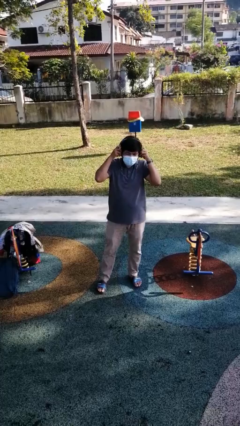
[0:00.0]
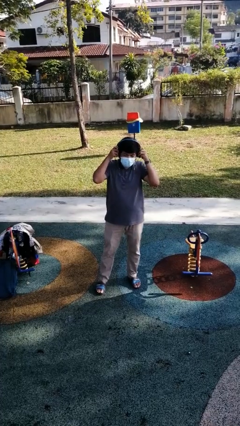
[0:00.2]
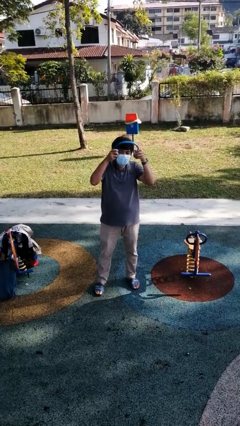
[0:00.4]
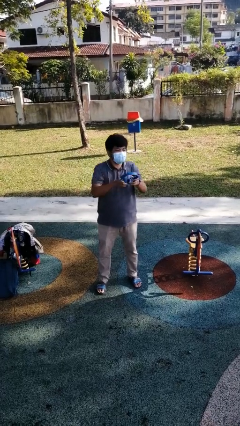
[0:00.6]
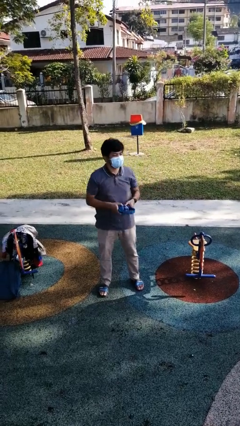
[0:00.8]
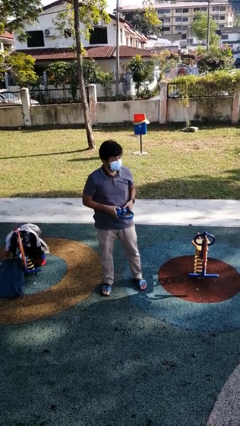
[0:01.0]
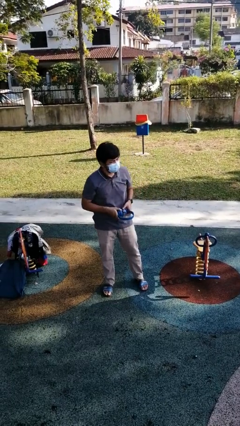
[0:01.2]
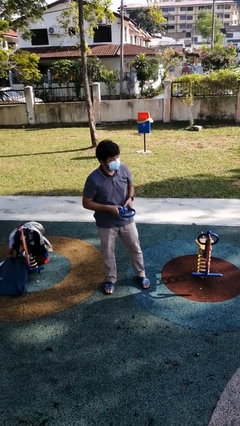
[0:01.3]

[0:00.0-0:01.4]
person takes off headphones

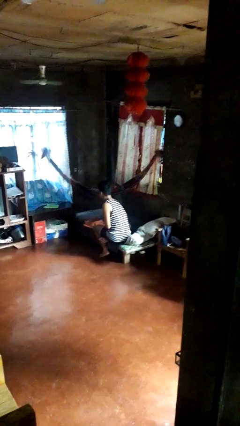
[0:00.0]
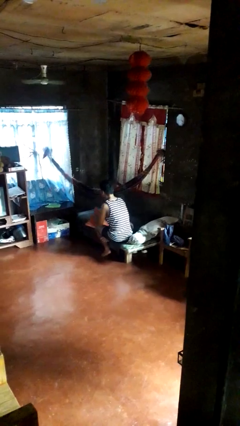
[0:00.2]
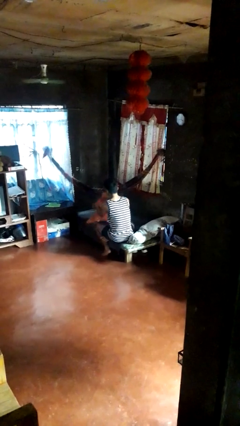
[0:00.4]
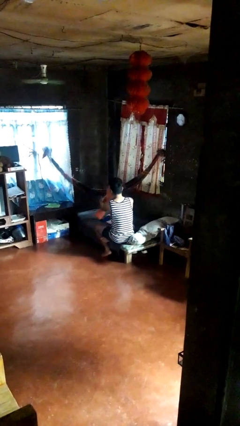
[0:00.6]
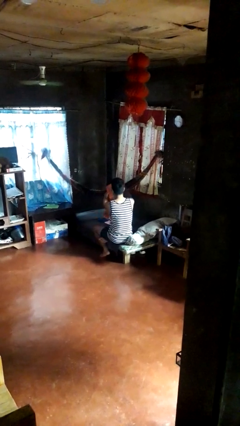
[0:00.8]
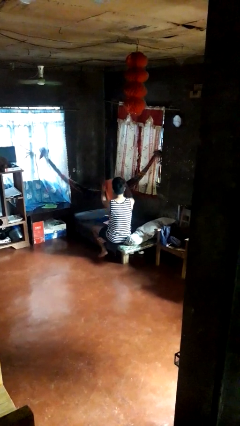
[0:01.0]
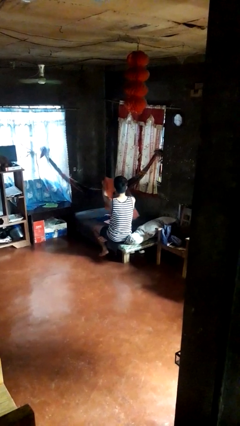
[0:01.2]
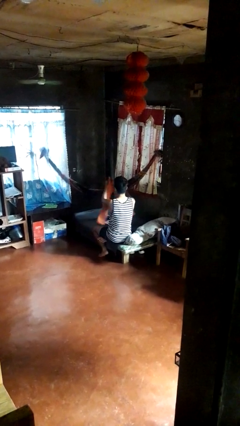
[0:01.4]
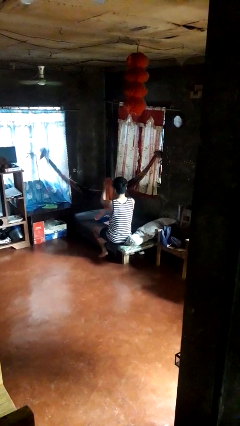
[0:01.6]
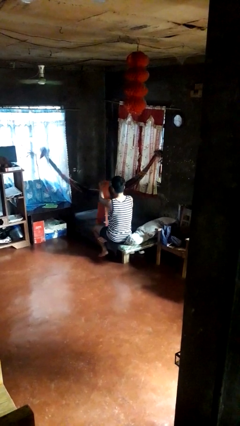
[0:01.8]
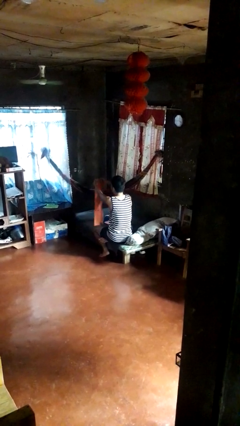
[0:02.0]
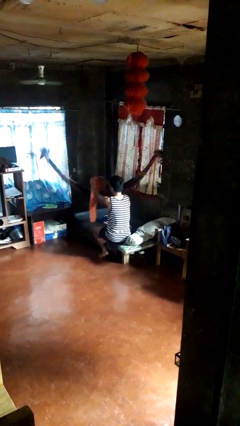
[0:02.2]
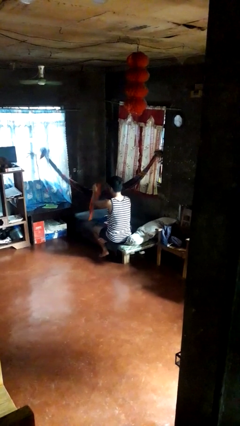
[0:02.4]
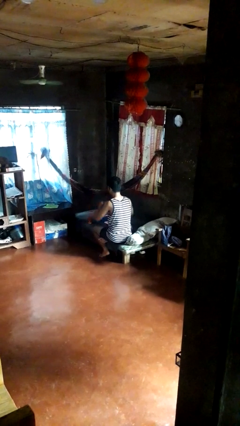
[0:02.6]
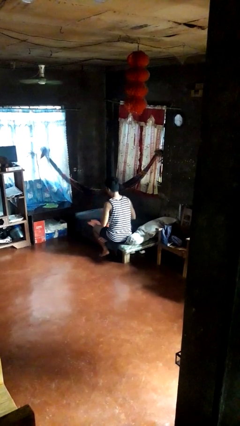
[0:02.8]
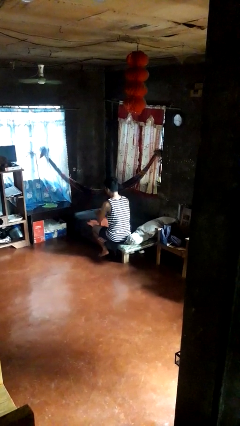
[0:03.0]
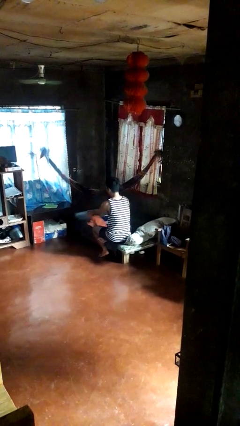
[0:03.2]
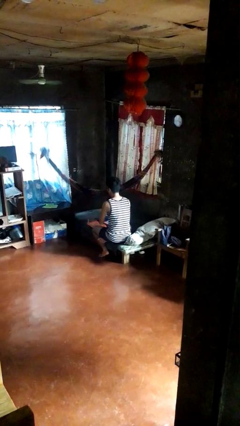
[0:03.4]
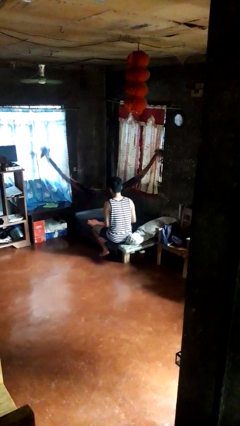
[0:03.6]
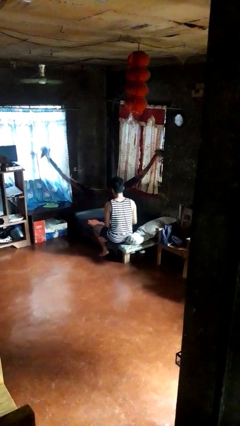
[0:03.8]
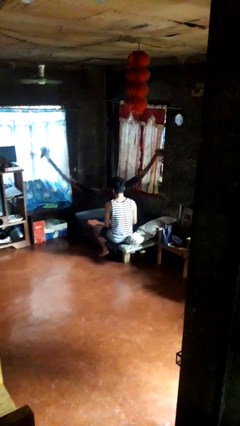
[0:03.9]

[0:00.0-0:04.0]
person folds pants

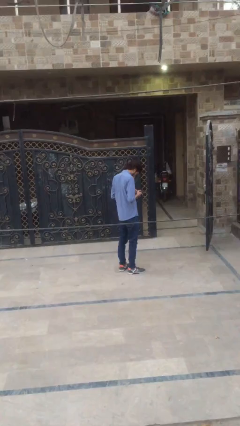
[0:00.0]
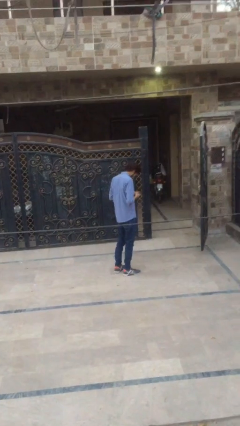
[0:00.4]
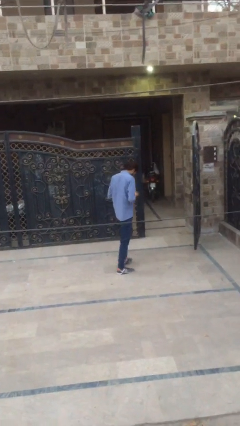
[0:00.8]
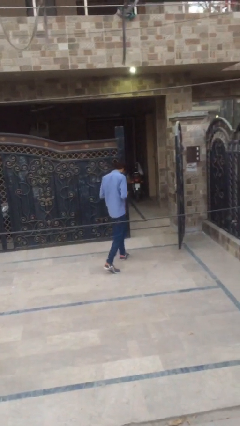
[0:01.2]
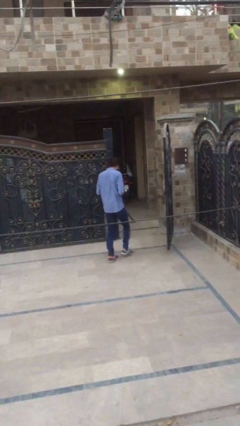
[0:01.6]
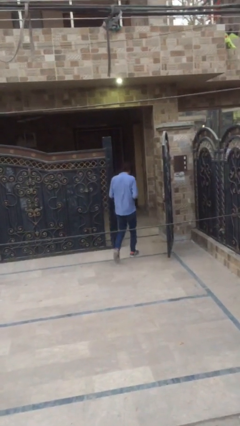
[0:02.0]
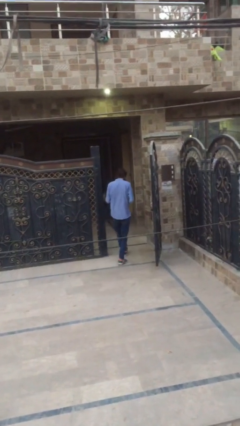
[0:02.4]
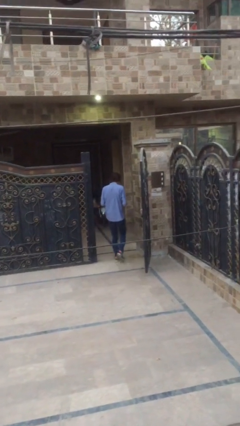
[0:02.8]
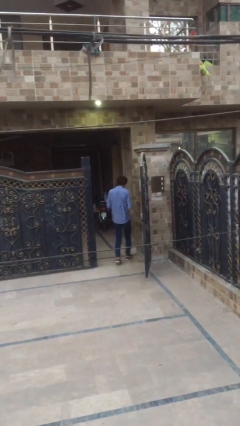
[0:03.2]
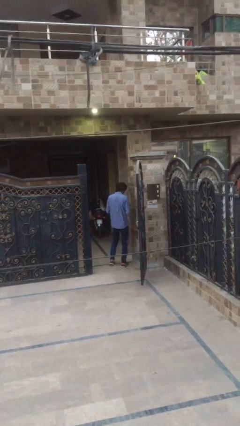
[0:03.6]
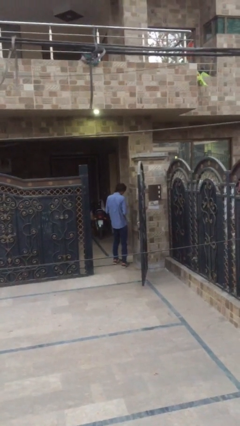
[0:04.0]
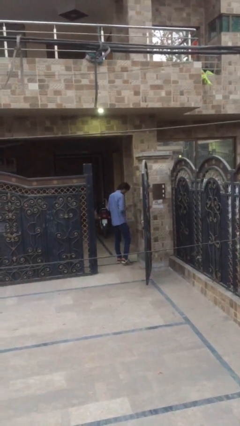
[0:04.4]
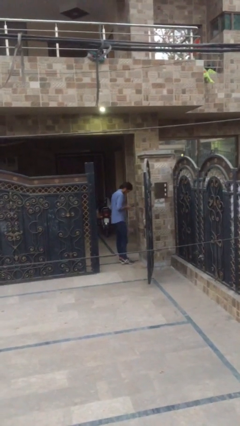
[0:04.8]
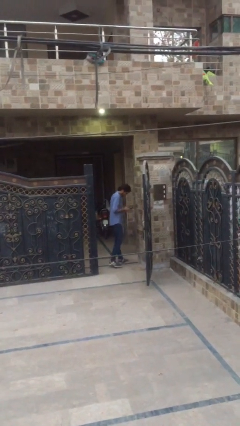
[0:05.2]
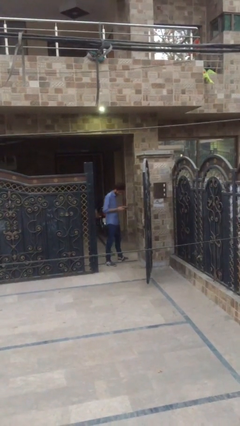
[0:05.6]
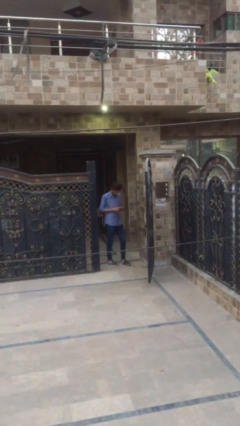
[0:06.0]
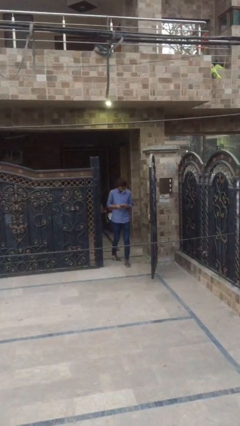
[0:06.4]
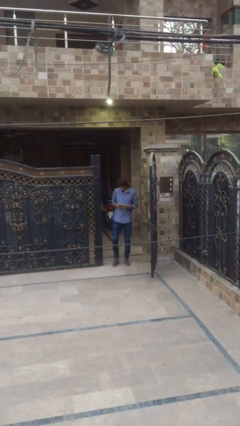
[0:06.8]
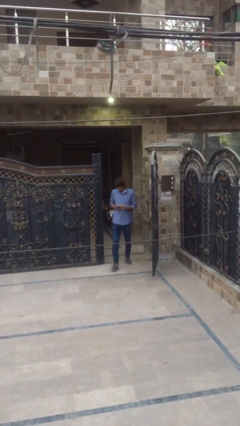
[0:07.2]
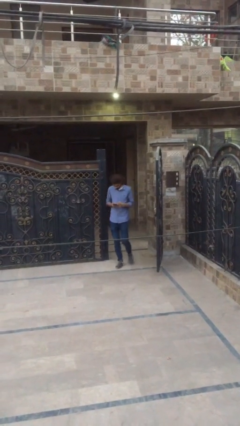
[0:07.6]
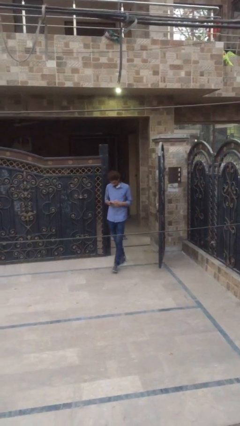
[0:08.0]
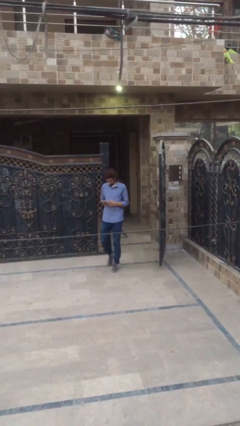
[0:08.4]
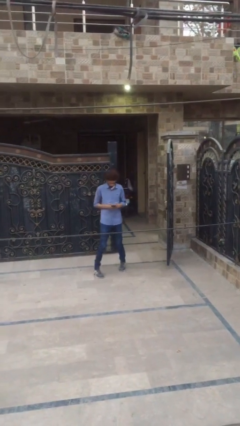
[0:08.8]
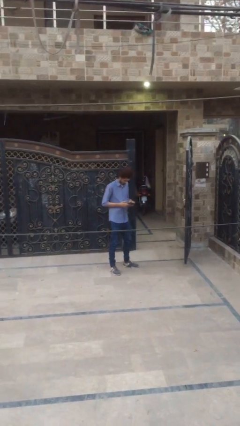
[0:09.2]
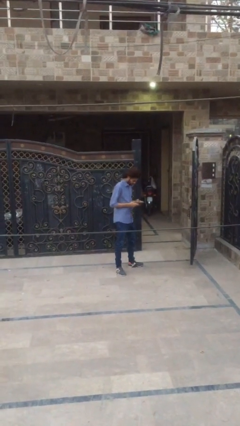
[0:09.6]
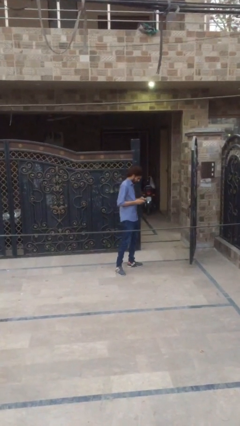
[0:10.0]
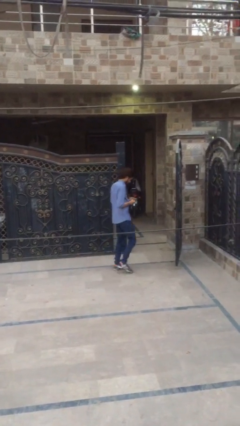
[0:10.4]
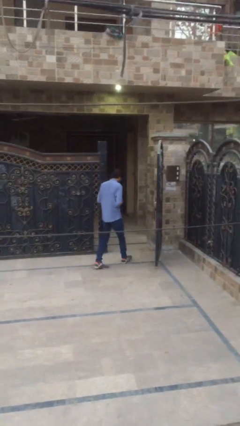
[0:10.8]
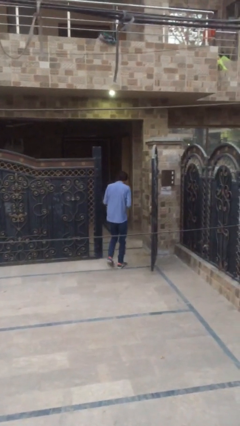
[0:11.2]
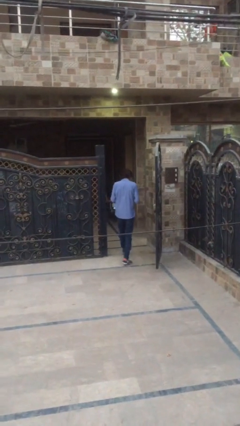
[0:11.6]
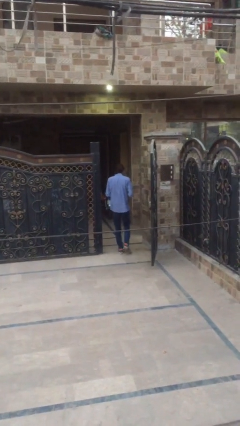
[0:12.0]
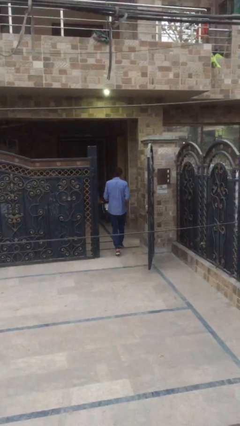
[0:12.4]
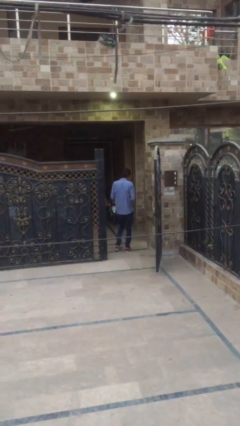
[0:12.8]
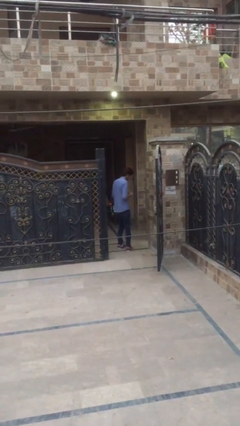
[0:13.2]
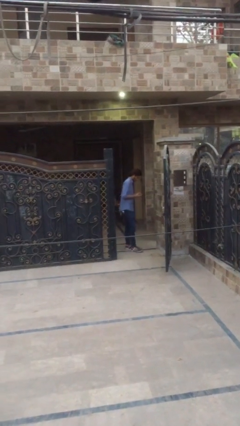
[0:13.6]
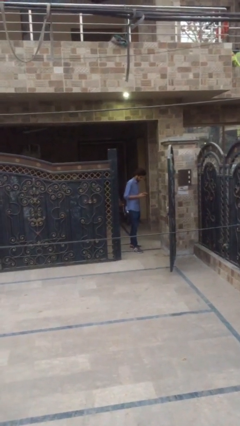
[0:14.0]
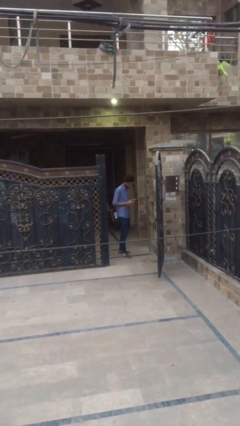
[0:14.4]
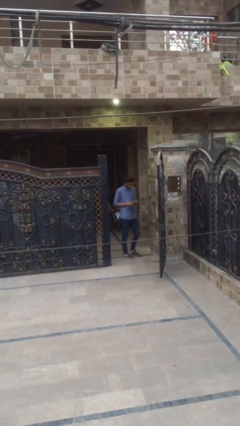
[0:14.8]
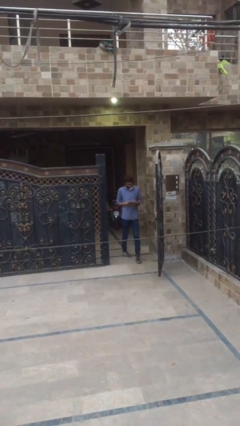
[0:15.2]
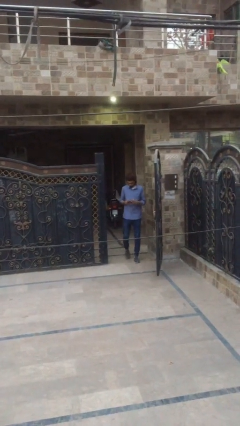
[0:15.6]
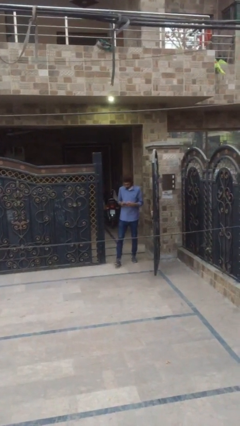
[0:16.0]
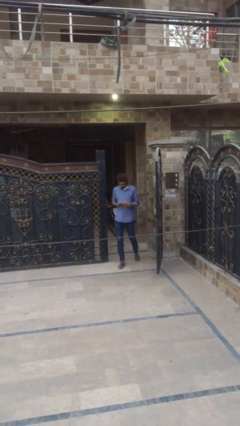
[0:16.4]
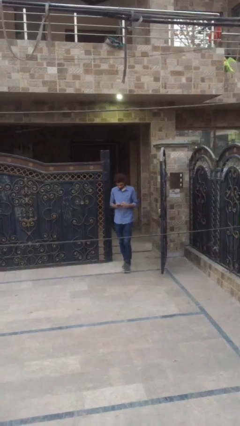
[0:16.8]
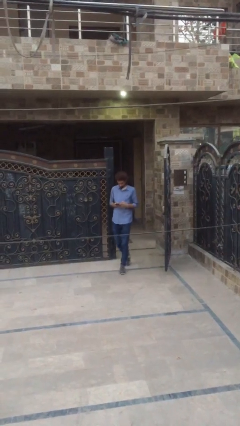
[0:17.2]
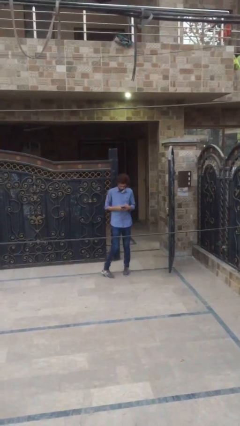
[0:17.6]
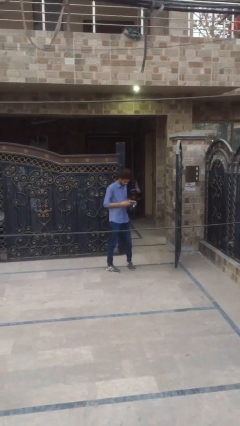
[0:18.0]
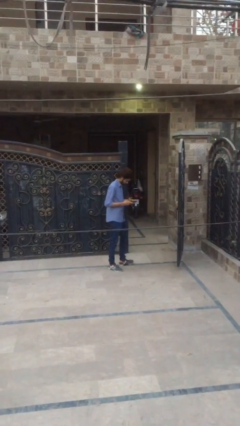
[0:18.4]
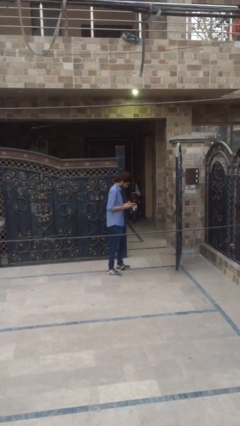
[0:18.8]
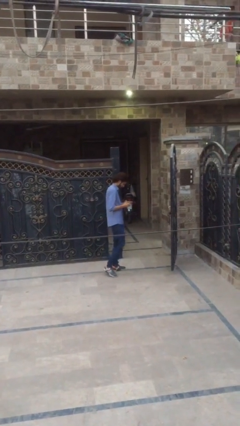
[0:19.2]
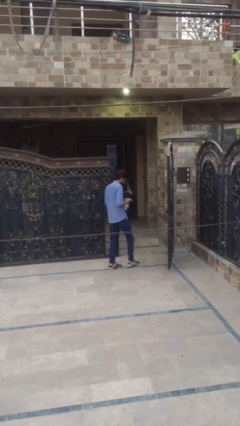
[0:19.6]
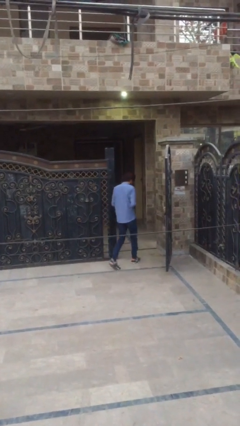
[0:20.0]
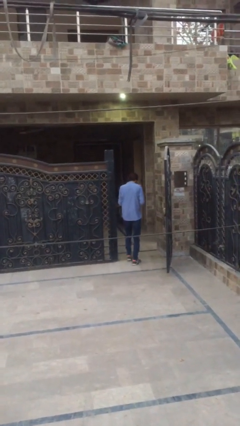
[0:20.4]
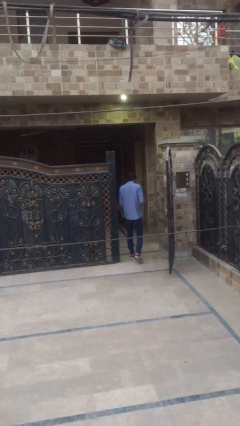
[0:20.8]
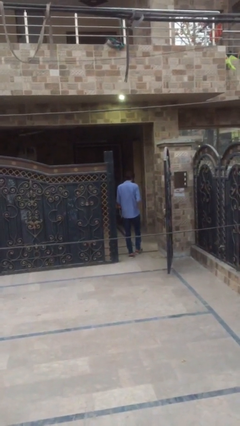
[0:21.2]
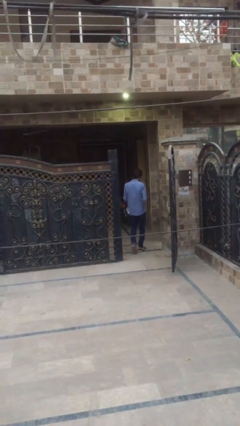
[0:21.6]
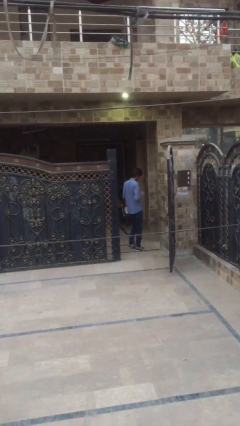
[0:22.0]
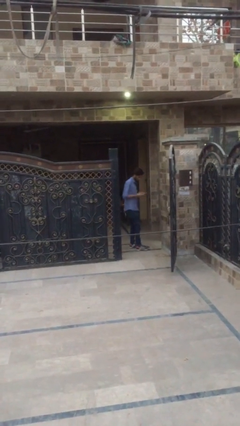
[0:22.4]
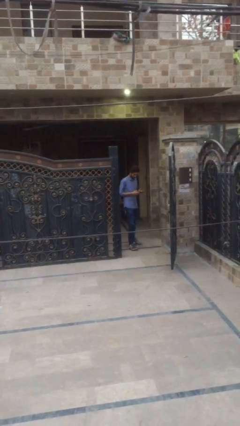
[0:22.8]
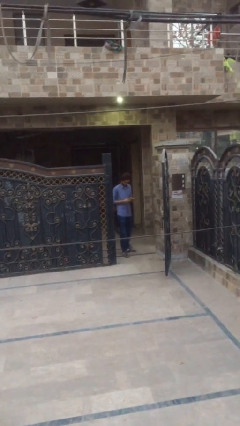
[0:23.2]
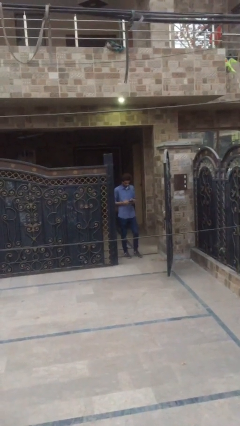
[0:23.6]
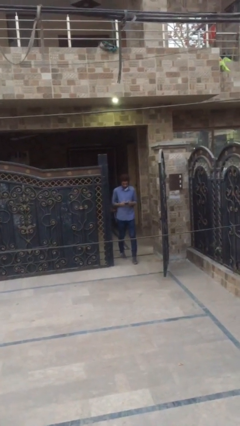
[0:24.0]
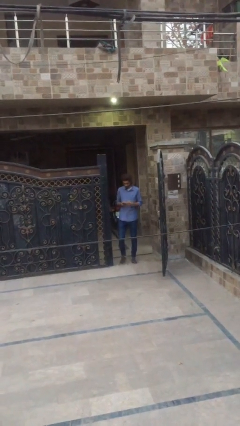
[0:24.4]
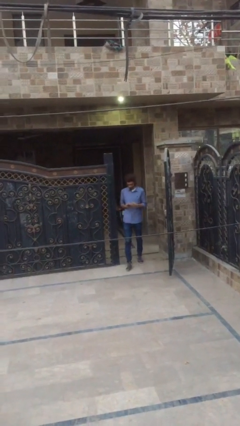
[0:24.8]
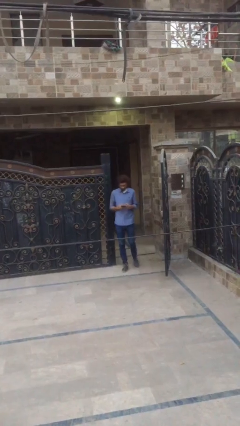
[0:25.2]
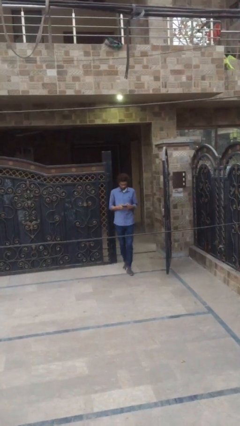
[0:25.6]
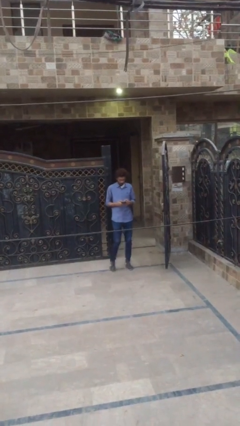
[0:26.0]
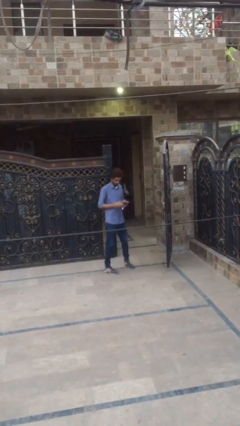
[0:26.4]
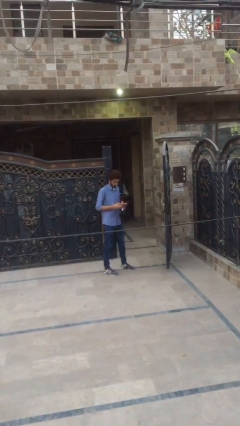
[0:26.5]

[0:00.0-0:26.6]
person texts on phone
